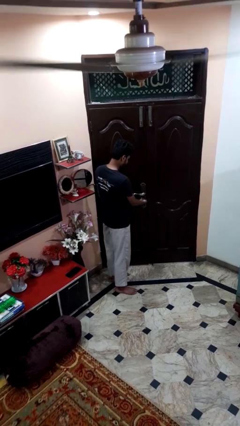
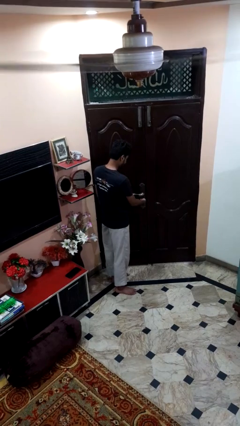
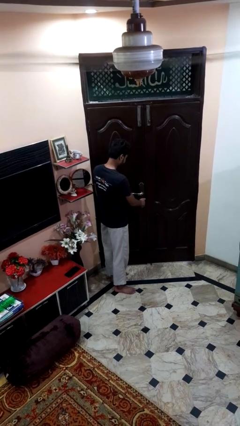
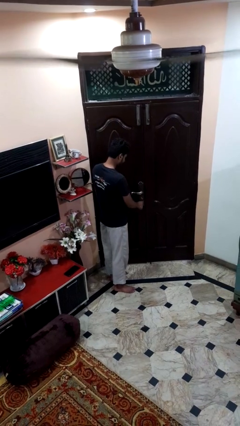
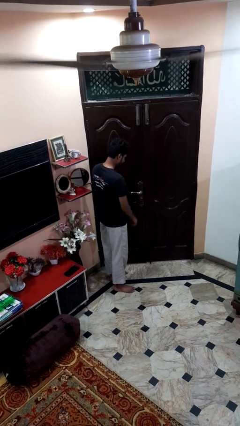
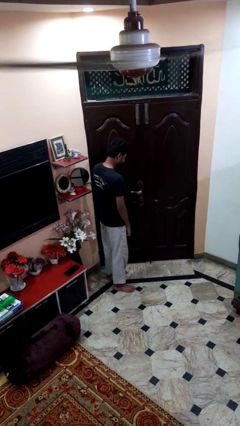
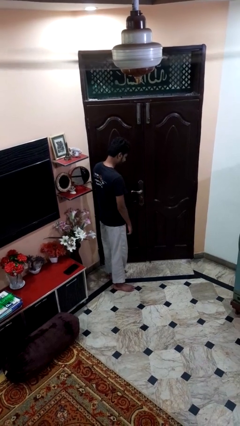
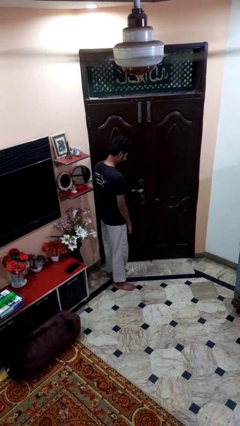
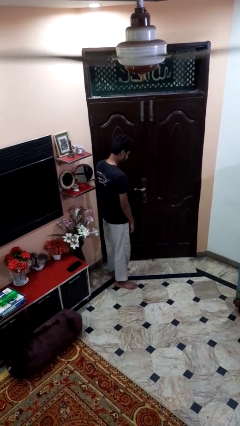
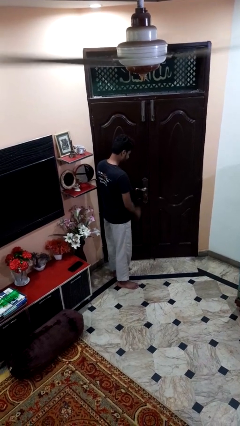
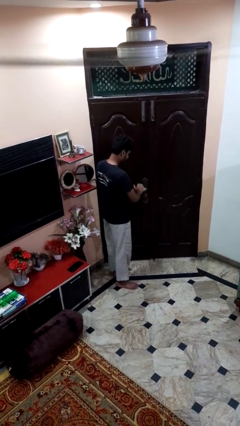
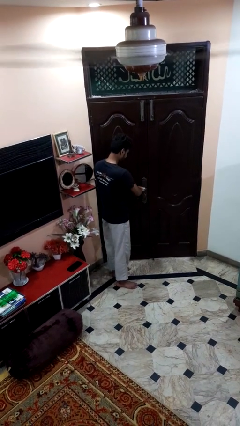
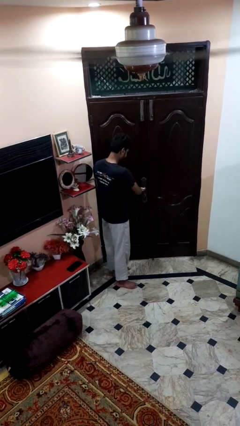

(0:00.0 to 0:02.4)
person unlocks door with keys

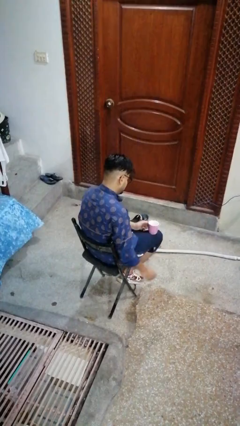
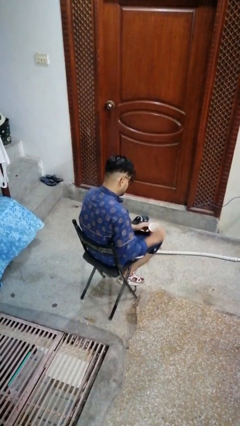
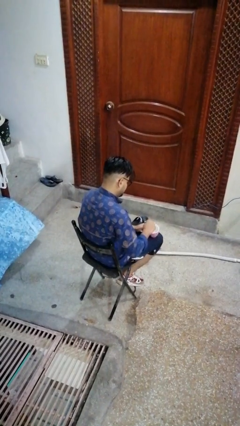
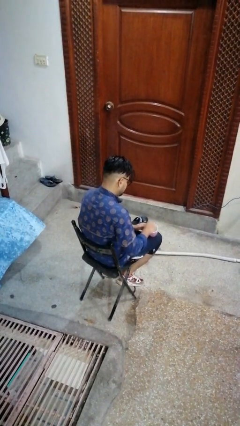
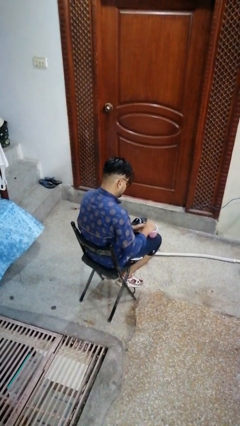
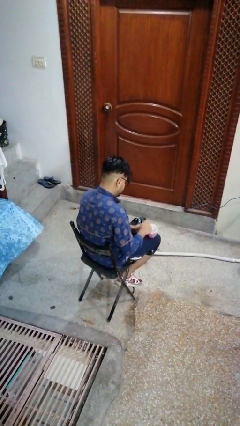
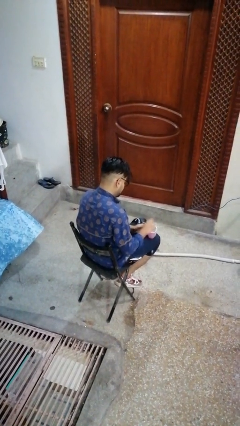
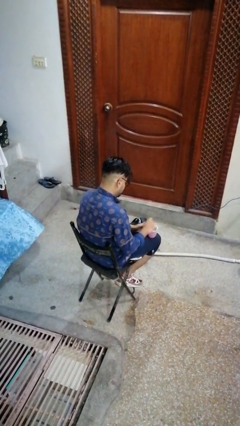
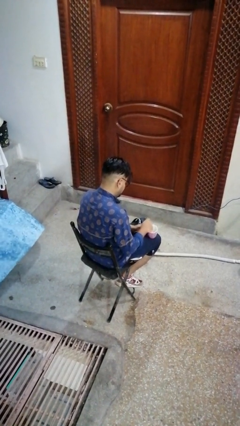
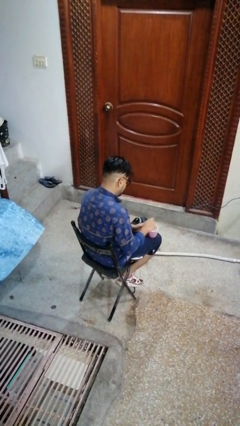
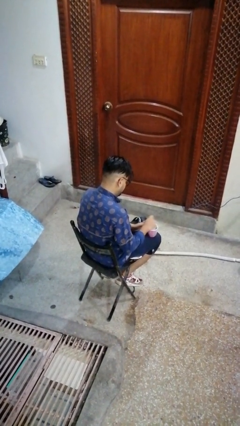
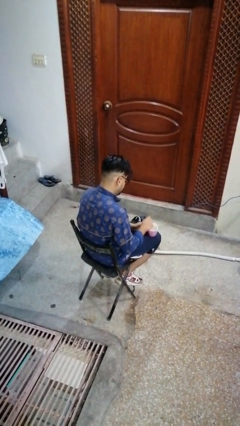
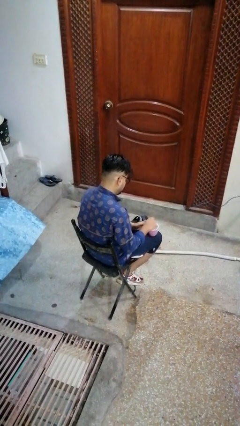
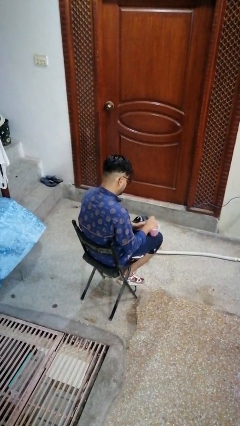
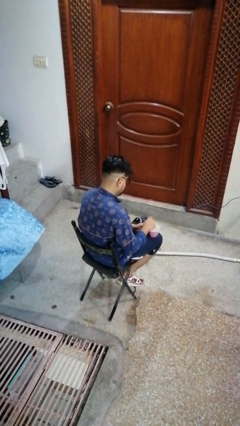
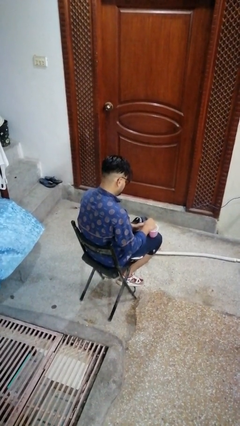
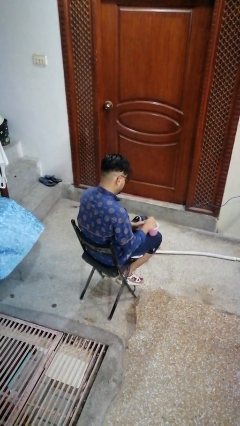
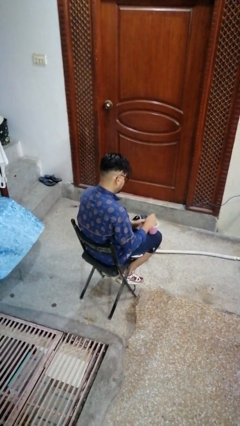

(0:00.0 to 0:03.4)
person stirs mug

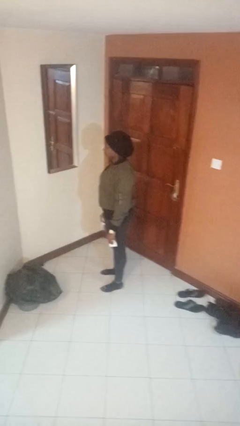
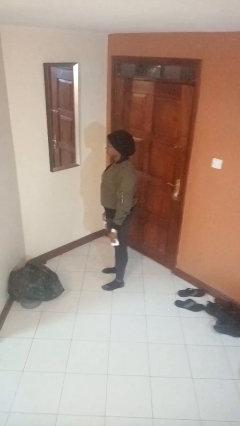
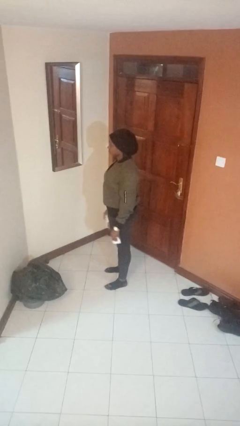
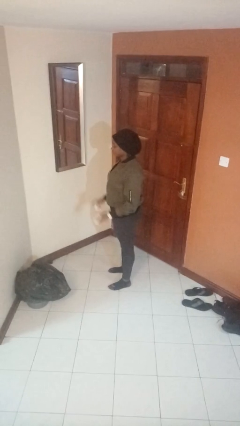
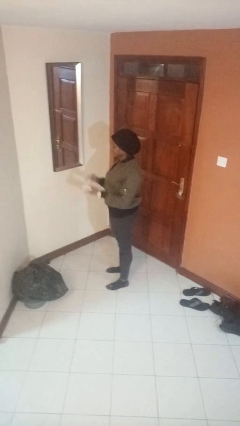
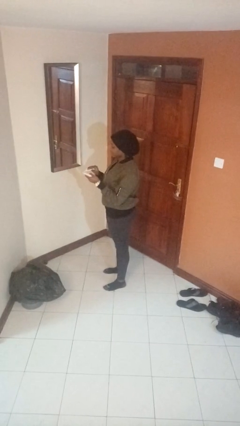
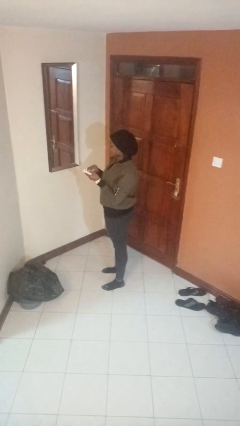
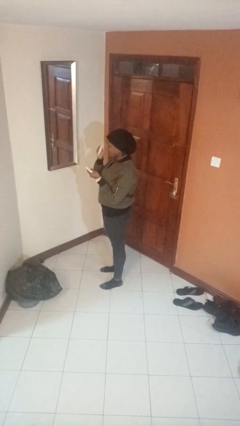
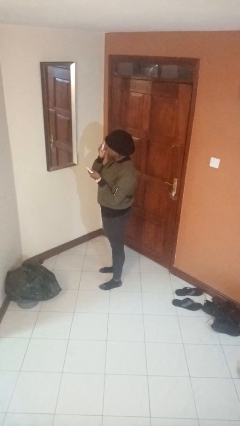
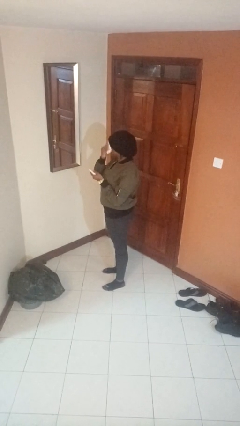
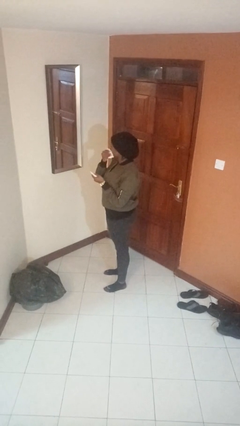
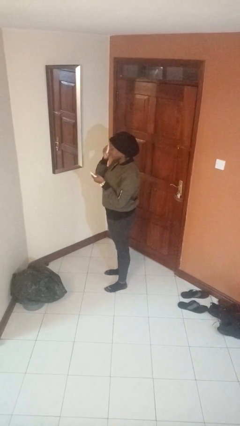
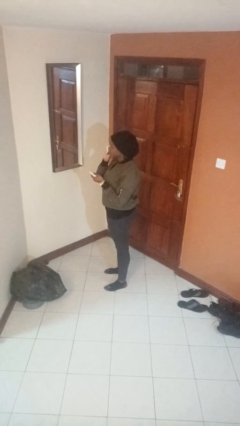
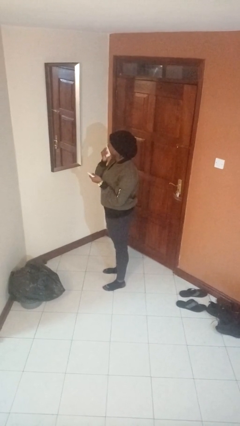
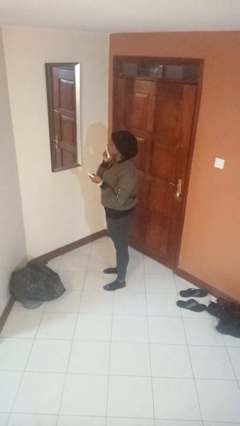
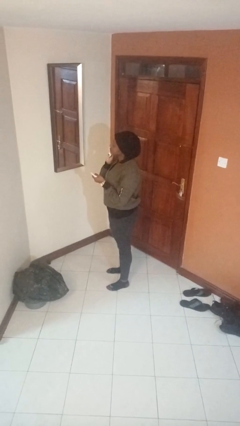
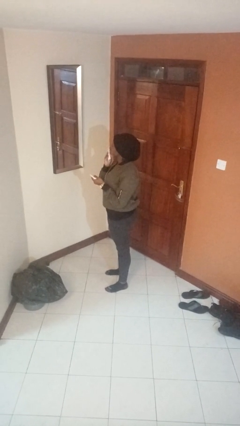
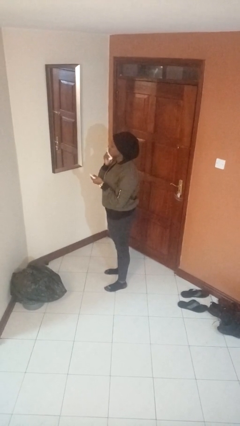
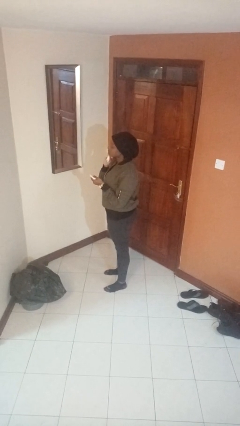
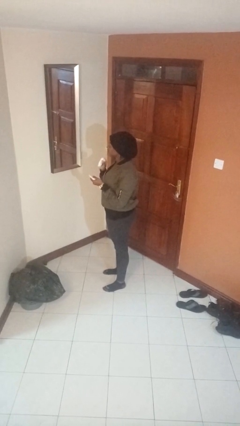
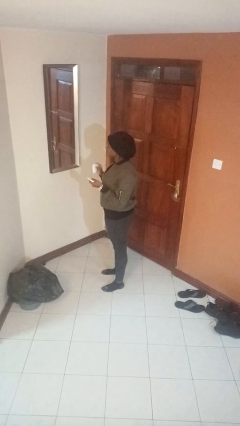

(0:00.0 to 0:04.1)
person applies foundation makeup

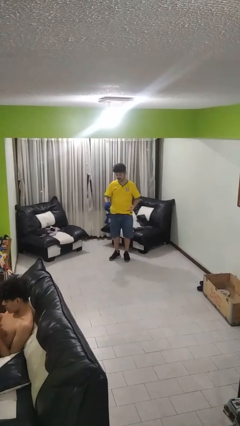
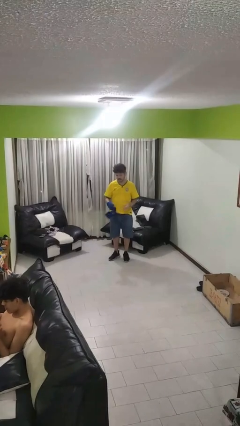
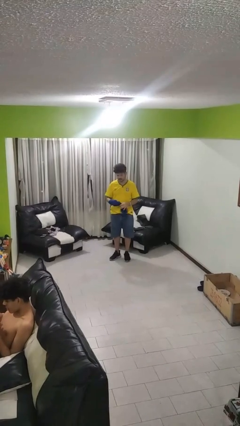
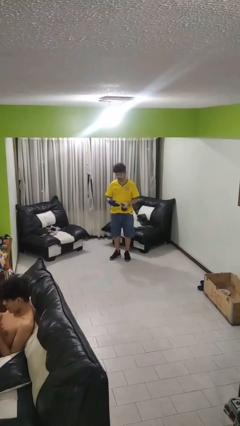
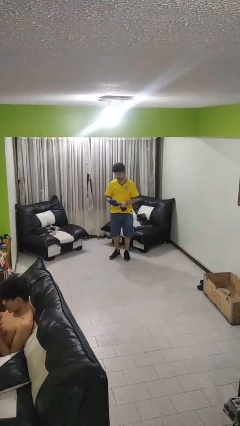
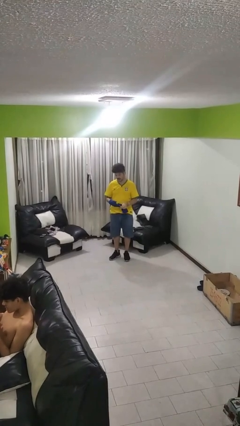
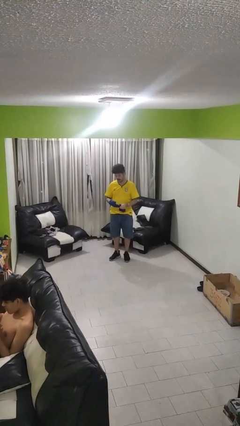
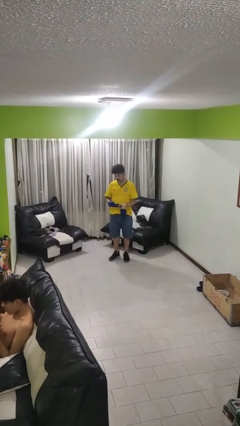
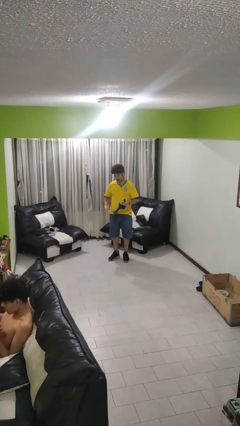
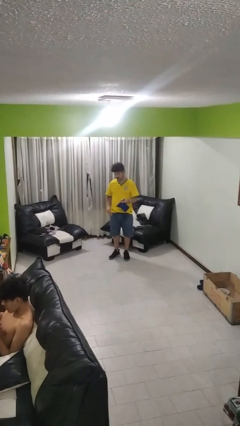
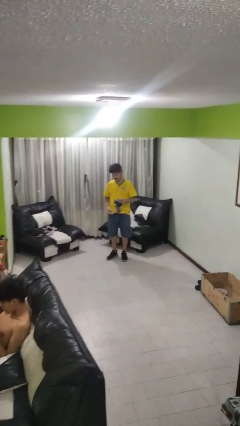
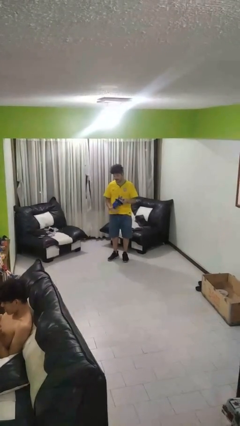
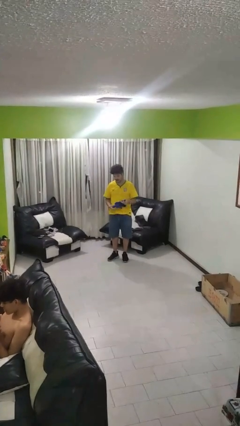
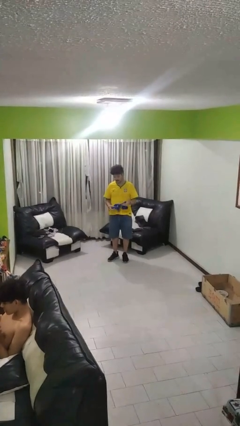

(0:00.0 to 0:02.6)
person takes off gloves

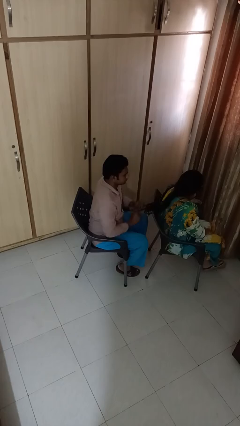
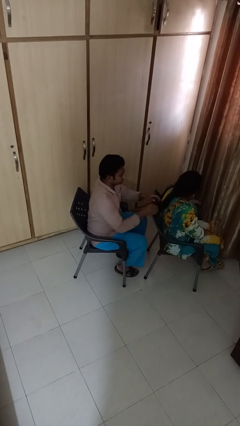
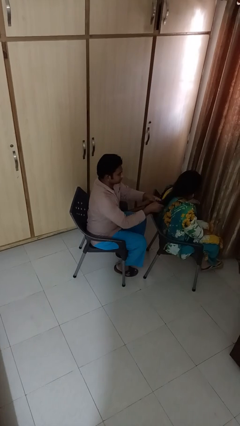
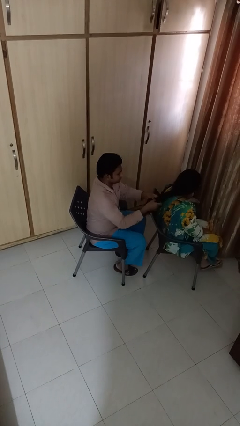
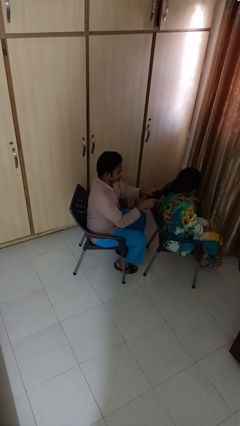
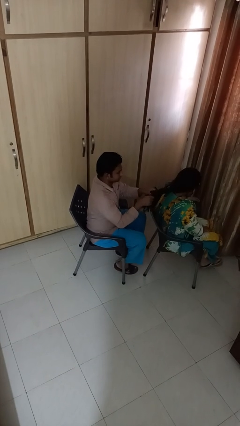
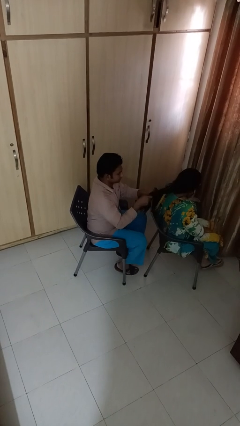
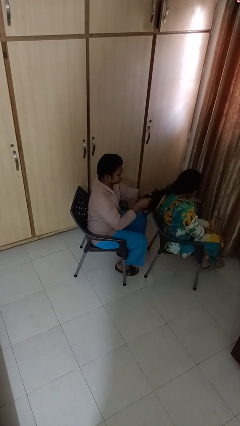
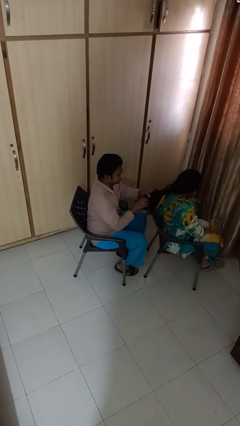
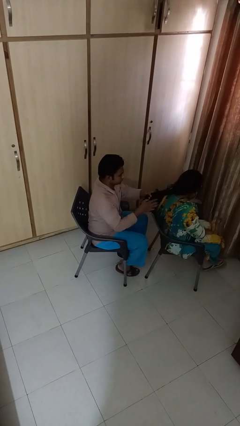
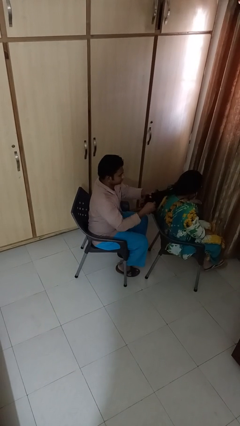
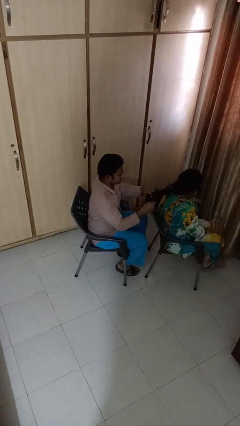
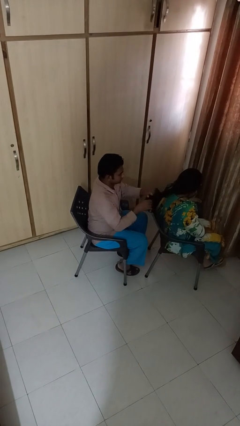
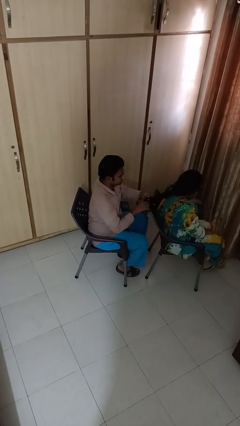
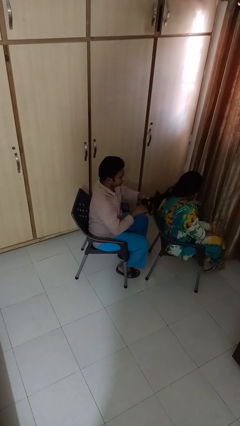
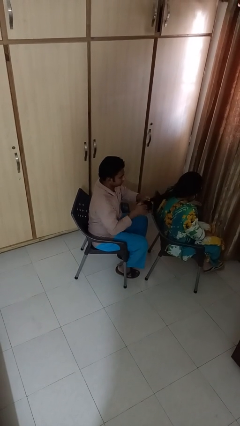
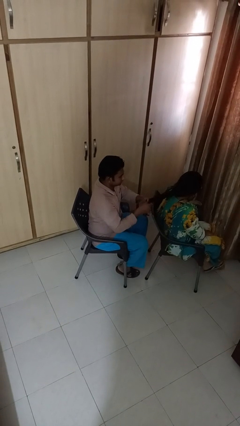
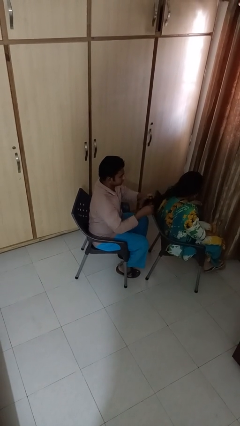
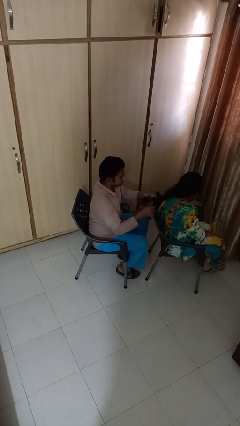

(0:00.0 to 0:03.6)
person braids hair of person

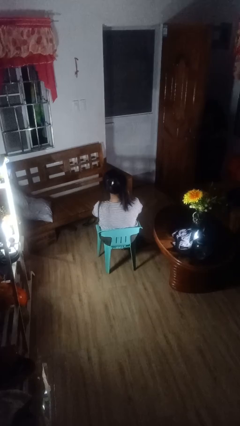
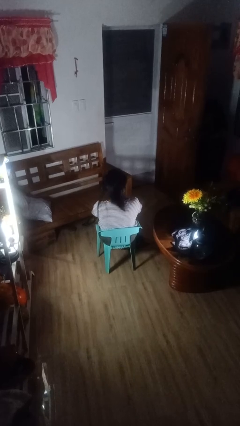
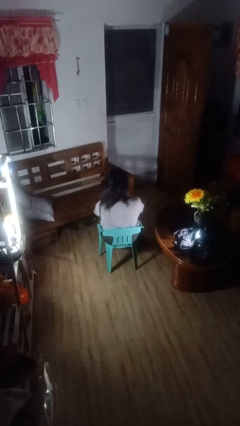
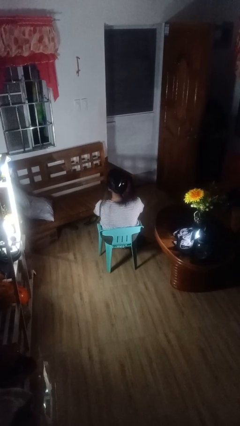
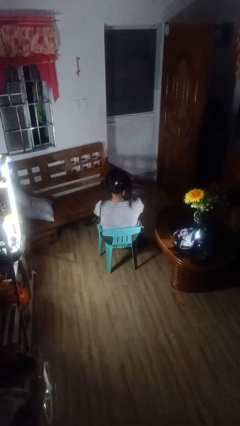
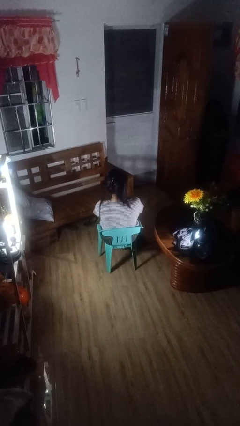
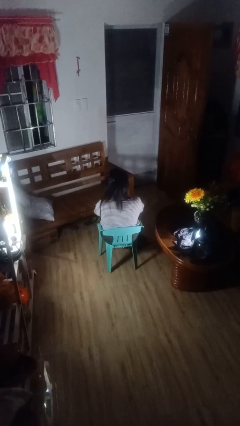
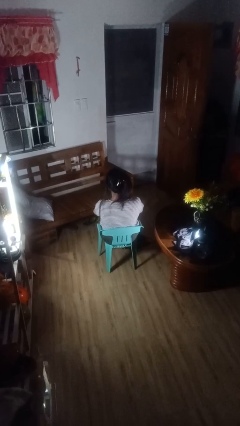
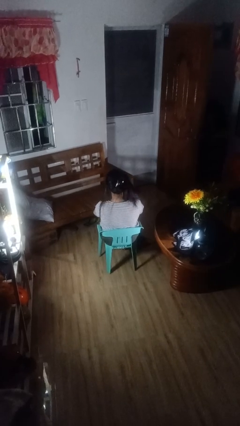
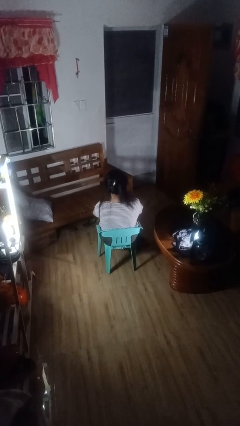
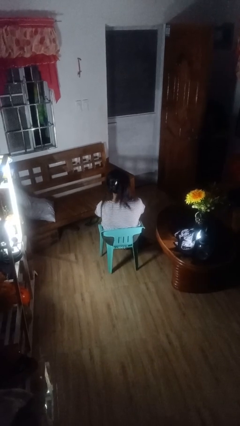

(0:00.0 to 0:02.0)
person shakes head
